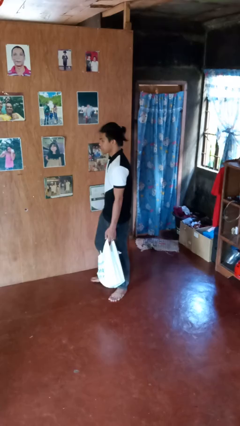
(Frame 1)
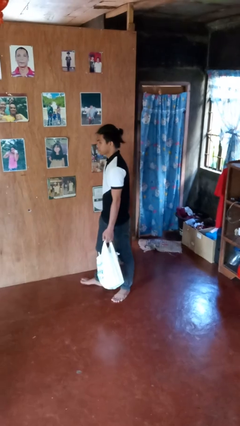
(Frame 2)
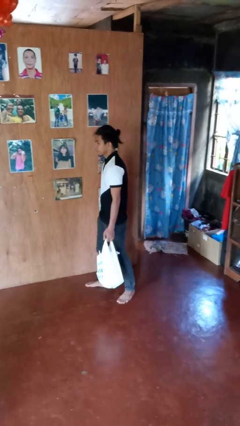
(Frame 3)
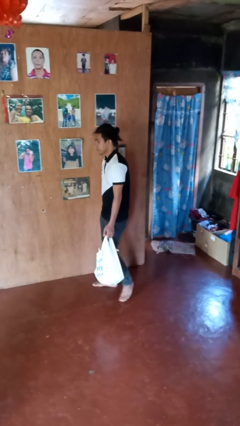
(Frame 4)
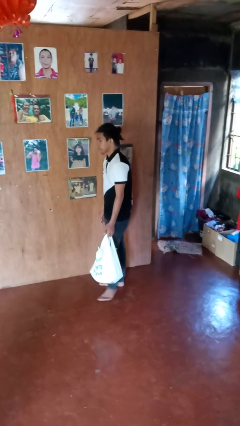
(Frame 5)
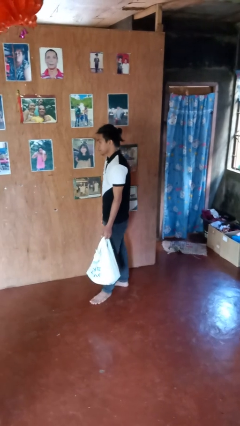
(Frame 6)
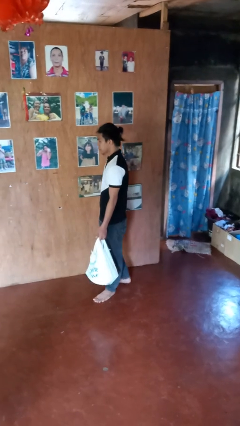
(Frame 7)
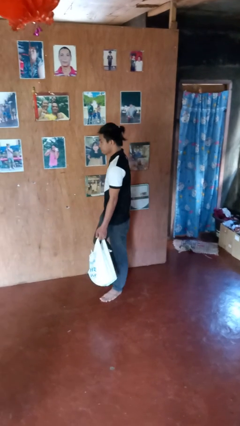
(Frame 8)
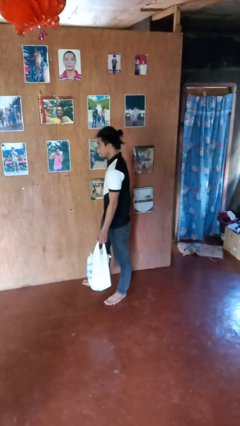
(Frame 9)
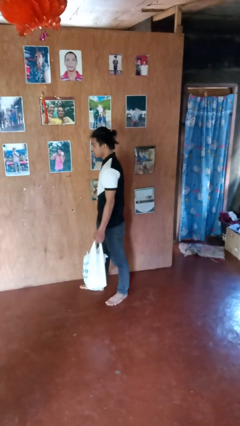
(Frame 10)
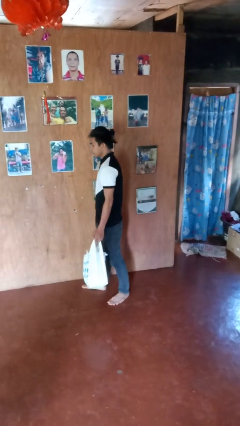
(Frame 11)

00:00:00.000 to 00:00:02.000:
person carries groceries

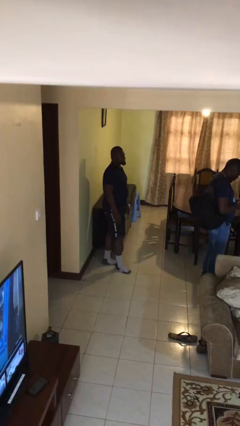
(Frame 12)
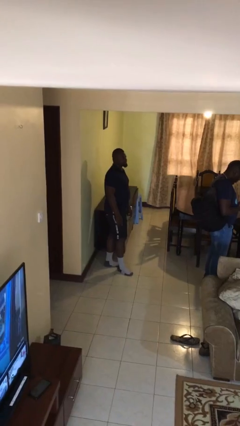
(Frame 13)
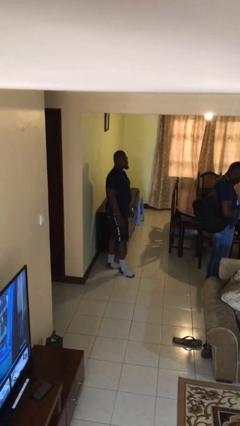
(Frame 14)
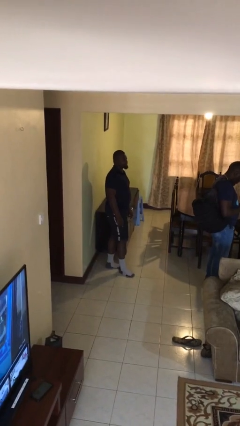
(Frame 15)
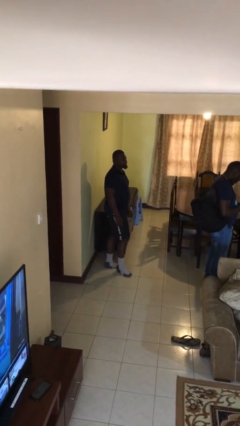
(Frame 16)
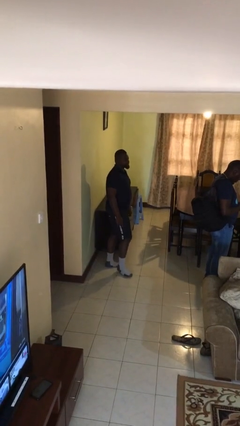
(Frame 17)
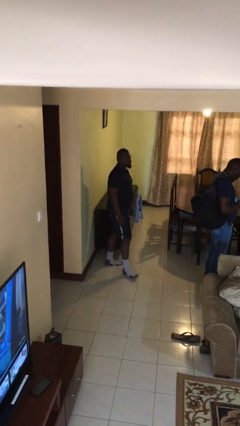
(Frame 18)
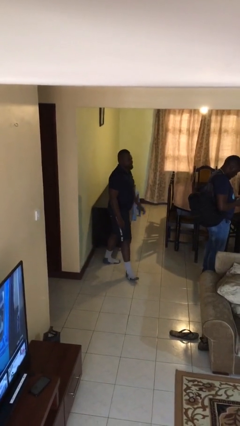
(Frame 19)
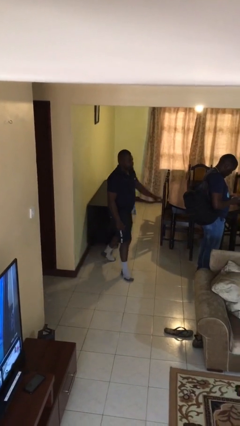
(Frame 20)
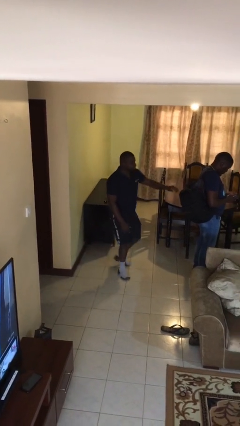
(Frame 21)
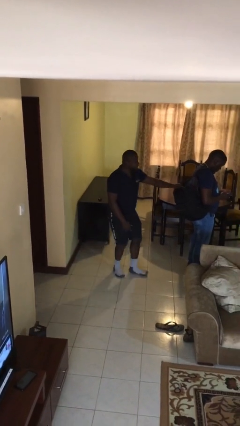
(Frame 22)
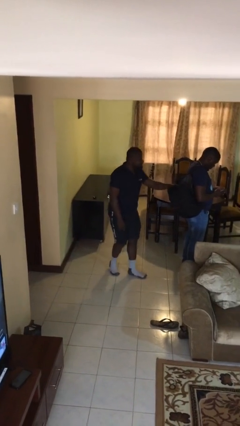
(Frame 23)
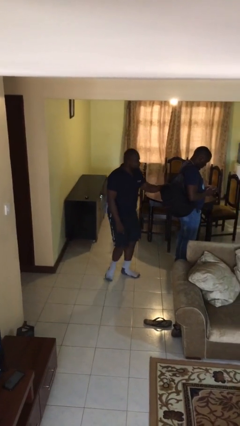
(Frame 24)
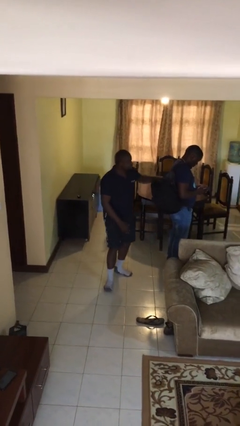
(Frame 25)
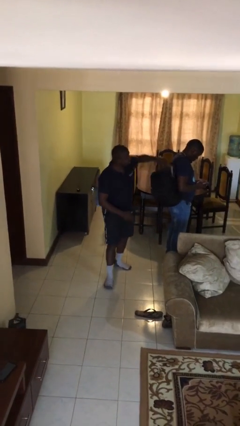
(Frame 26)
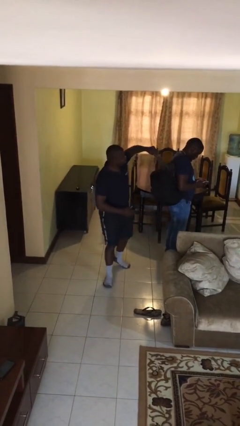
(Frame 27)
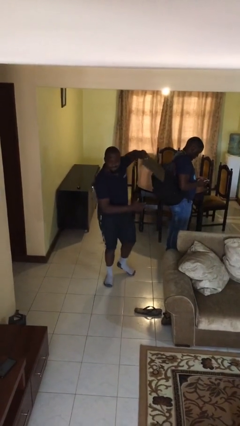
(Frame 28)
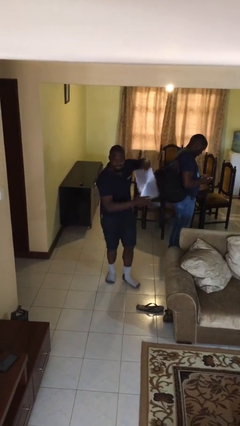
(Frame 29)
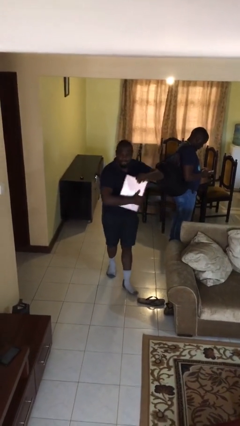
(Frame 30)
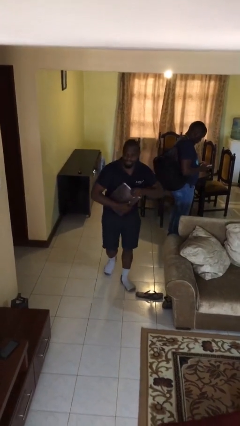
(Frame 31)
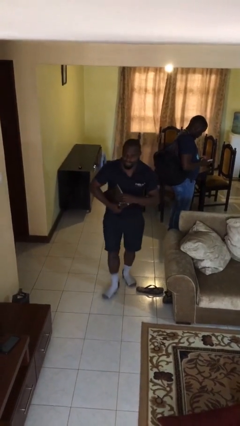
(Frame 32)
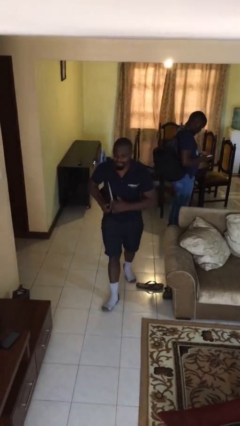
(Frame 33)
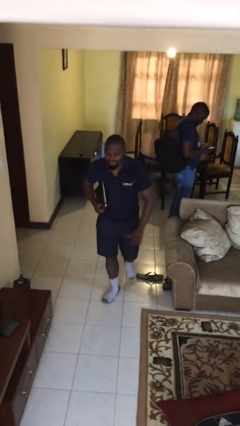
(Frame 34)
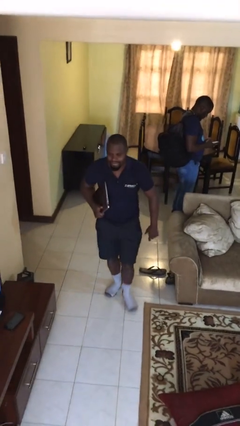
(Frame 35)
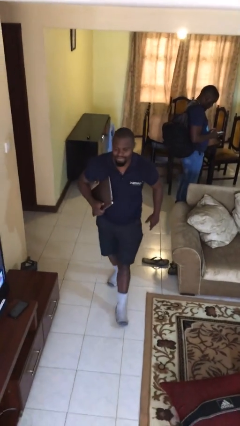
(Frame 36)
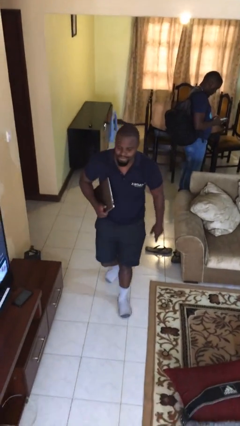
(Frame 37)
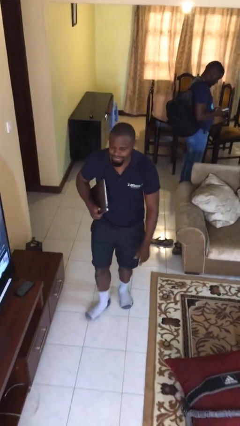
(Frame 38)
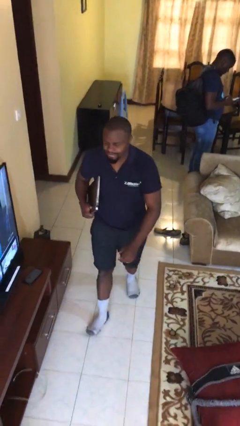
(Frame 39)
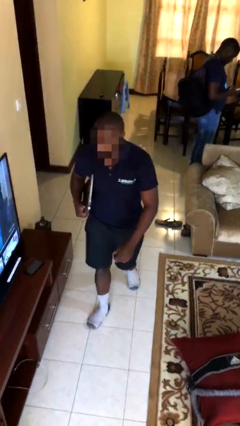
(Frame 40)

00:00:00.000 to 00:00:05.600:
person steals object from person

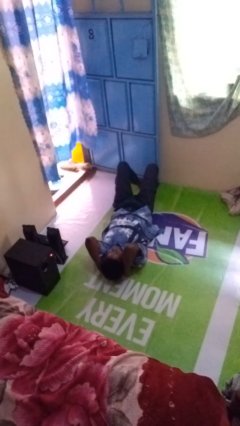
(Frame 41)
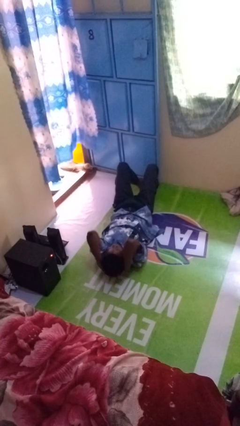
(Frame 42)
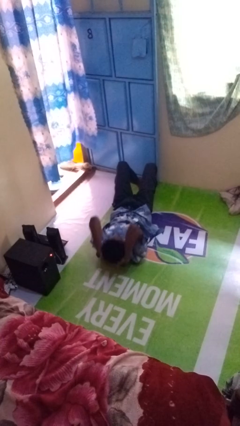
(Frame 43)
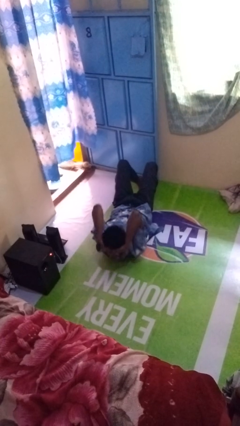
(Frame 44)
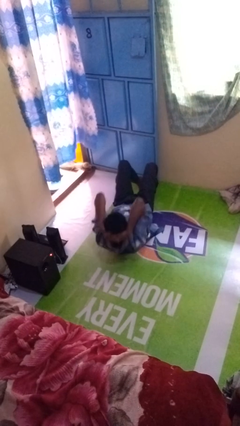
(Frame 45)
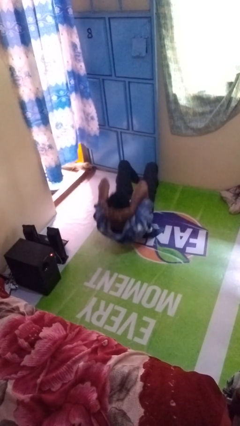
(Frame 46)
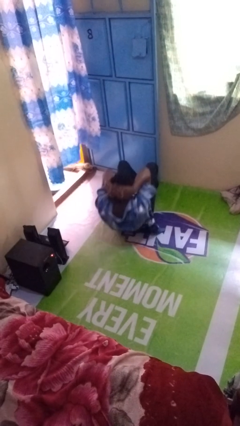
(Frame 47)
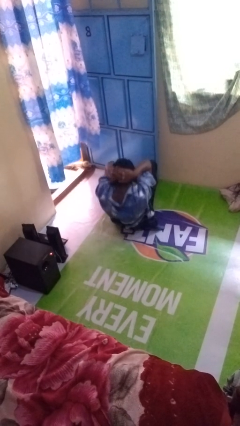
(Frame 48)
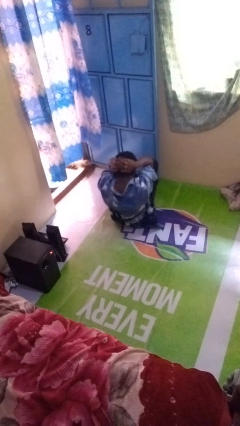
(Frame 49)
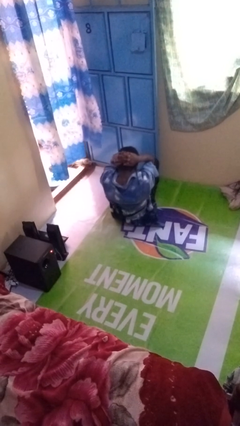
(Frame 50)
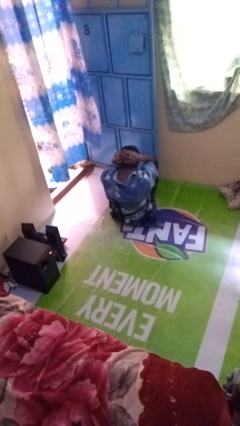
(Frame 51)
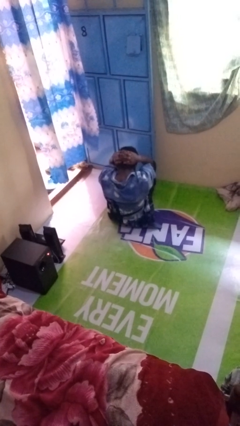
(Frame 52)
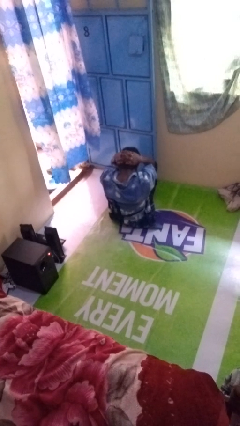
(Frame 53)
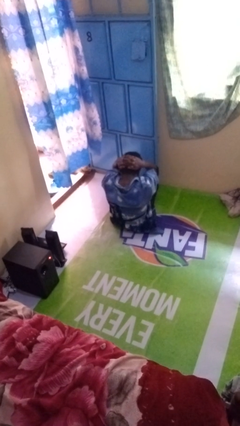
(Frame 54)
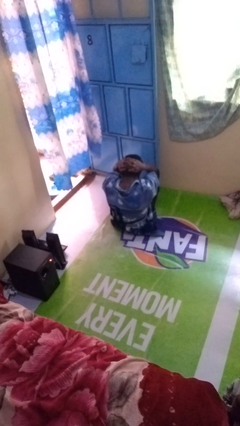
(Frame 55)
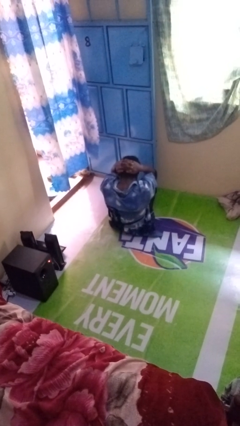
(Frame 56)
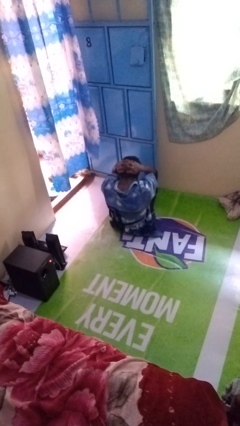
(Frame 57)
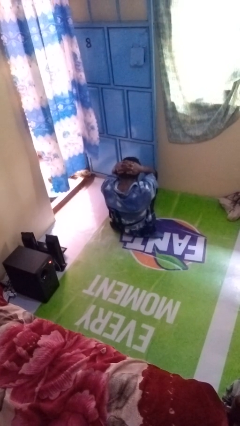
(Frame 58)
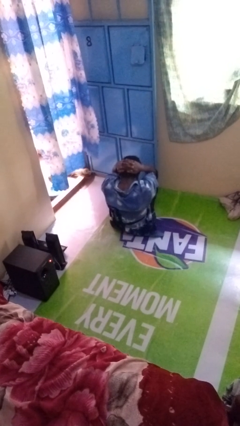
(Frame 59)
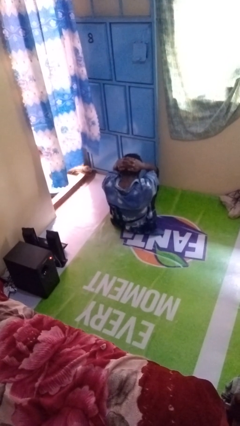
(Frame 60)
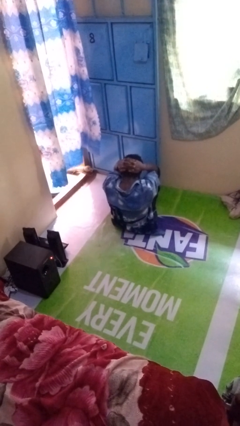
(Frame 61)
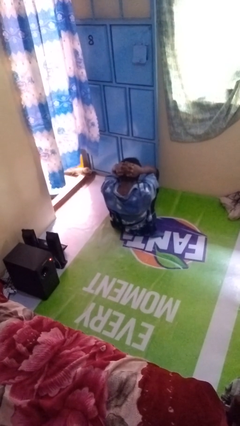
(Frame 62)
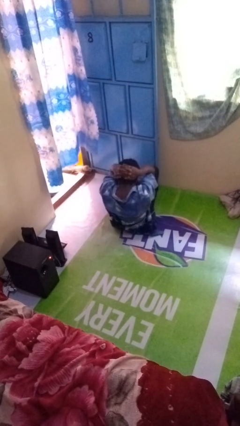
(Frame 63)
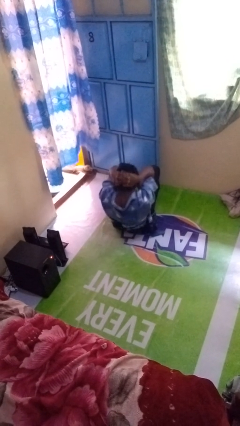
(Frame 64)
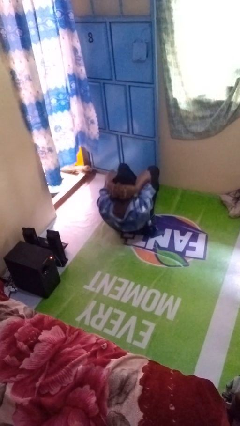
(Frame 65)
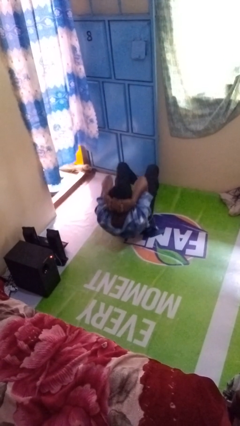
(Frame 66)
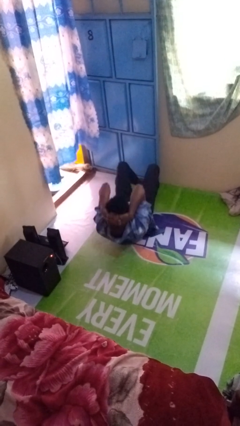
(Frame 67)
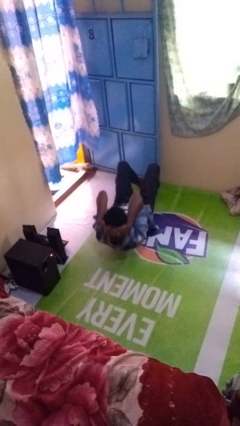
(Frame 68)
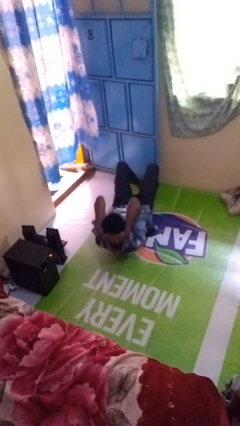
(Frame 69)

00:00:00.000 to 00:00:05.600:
person exercises with situp

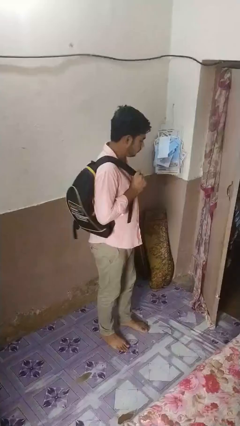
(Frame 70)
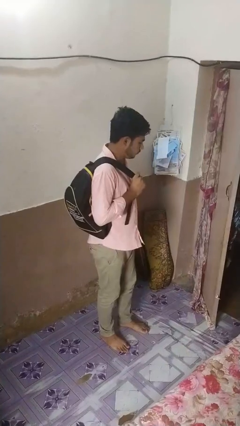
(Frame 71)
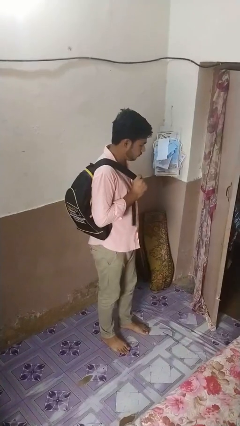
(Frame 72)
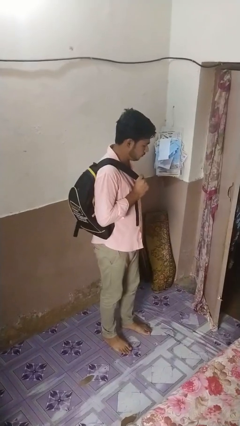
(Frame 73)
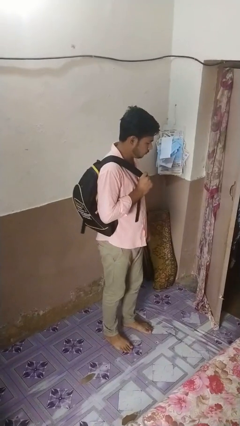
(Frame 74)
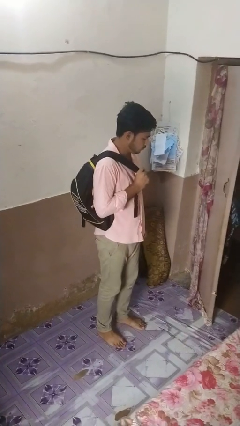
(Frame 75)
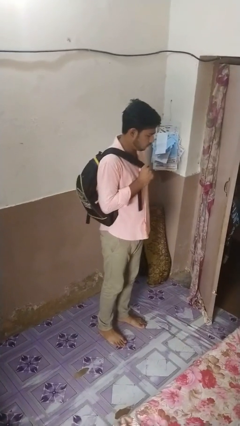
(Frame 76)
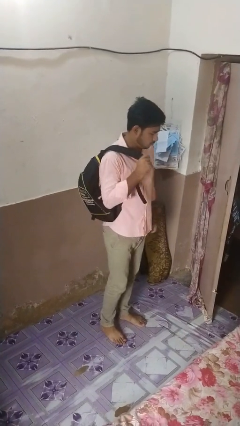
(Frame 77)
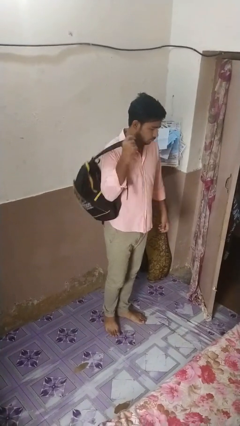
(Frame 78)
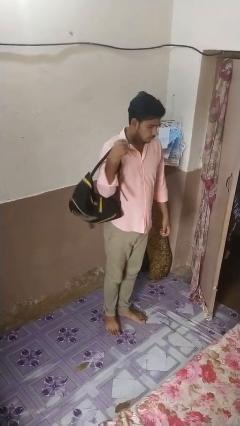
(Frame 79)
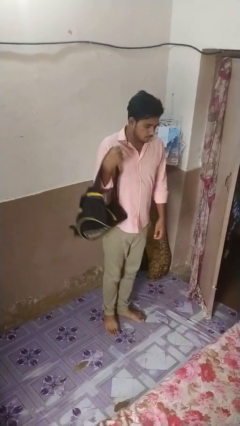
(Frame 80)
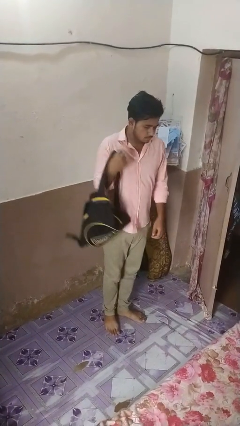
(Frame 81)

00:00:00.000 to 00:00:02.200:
person puts on backpack

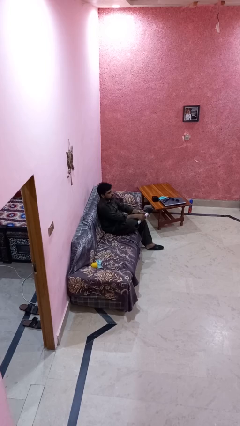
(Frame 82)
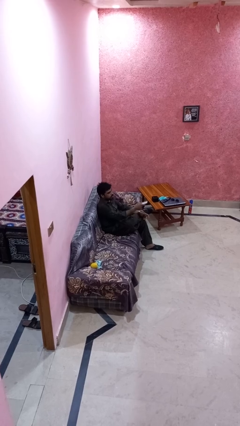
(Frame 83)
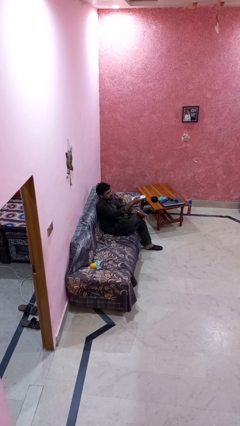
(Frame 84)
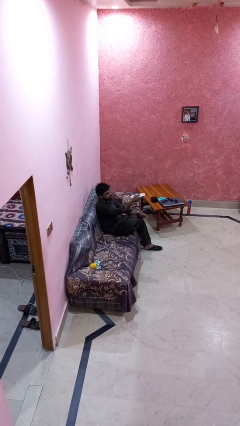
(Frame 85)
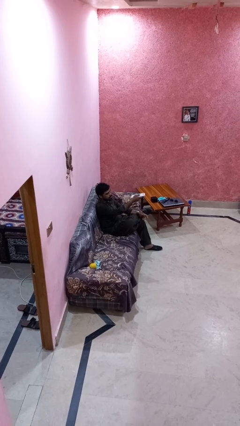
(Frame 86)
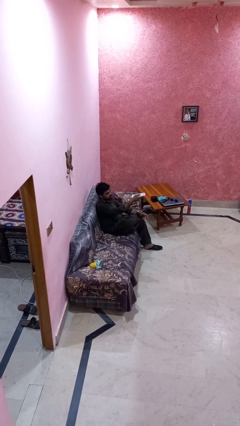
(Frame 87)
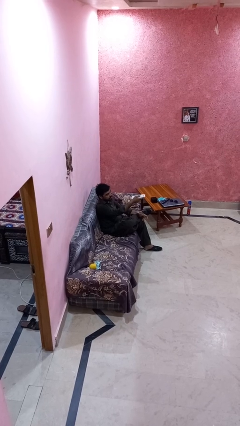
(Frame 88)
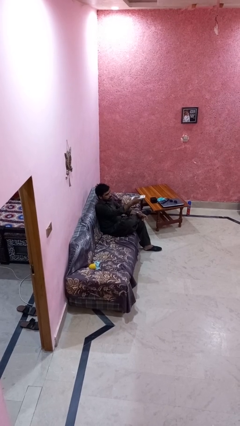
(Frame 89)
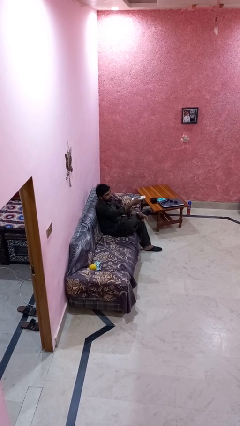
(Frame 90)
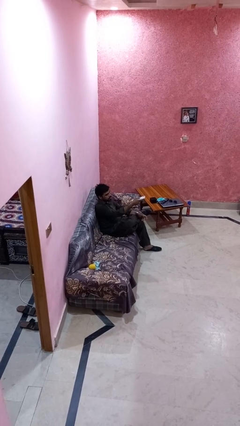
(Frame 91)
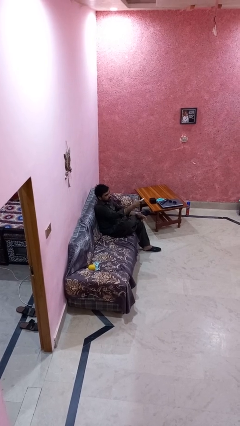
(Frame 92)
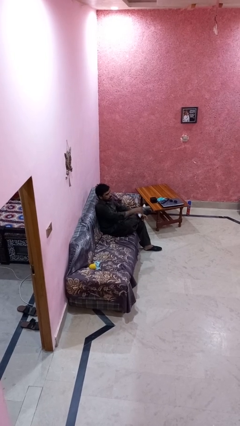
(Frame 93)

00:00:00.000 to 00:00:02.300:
person uses television remote
